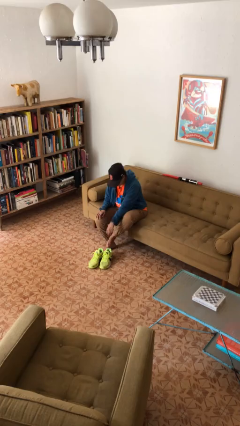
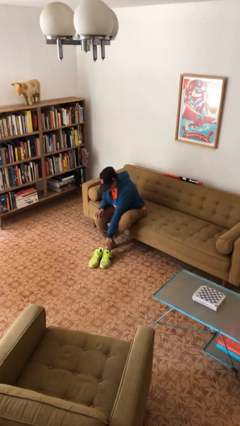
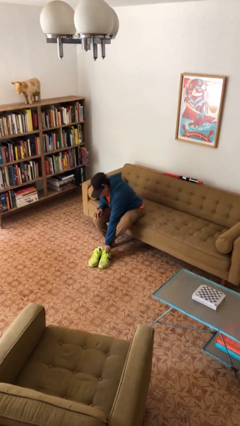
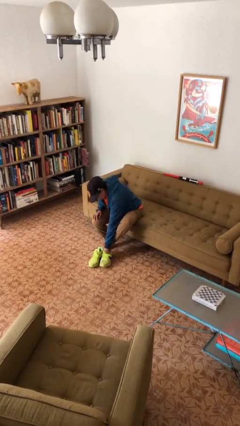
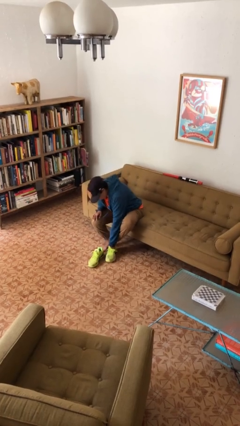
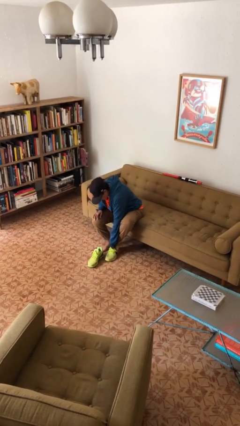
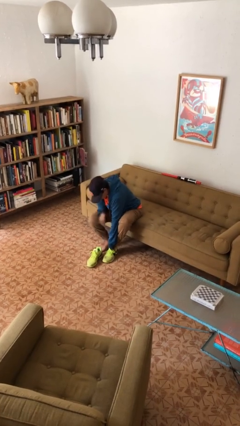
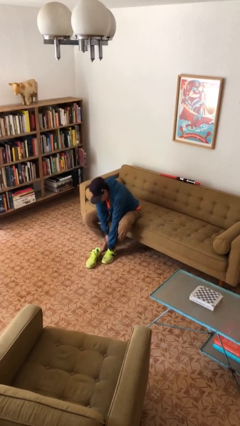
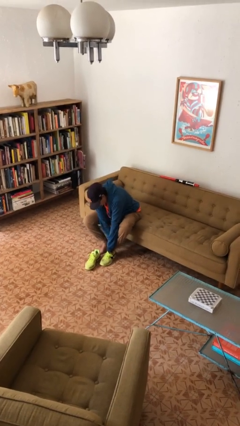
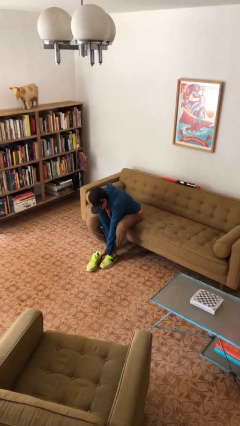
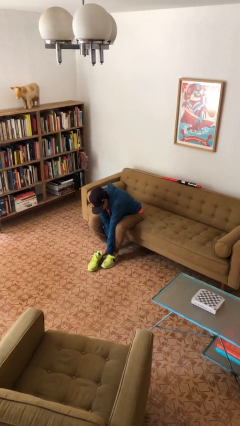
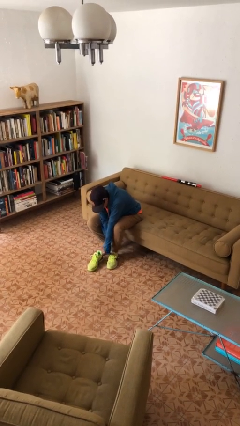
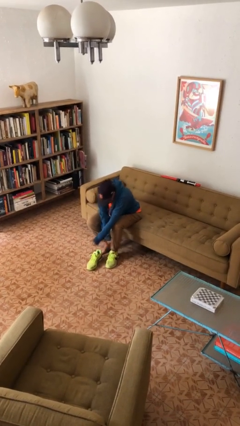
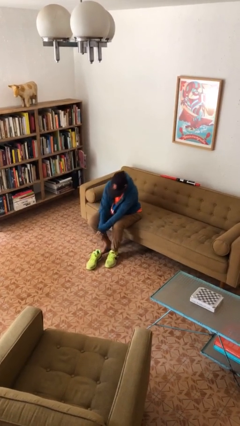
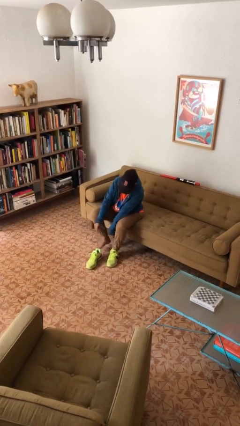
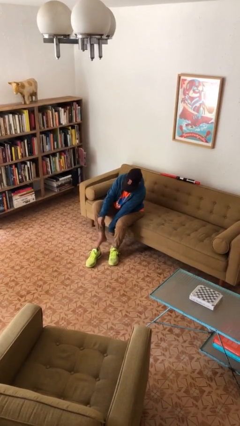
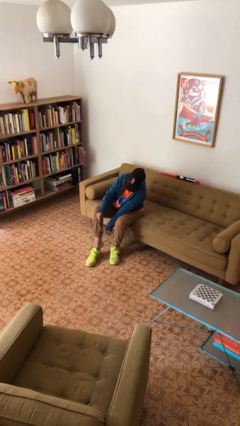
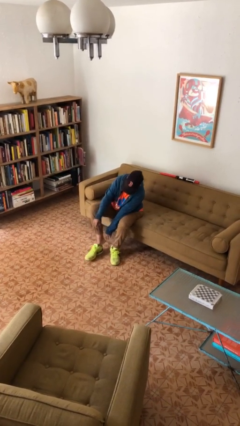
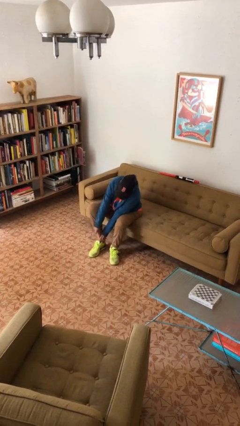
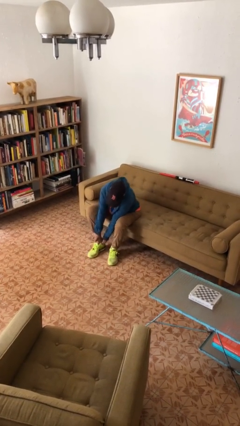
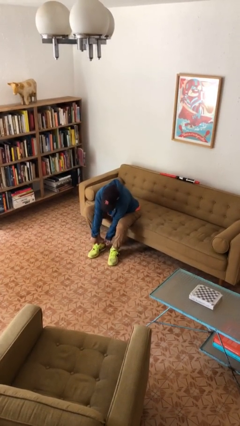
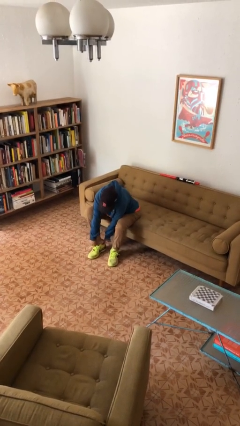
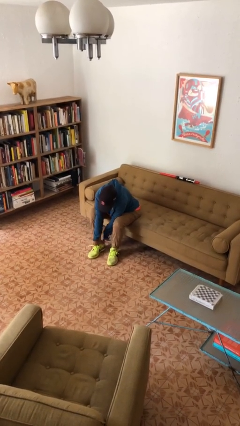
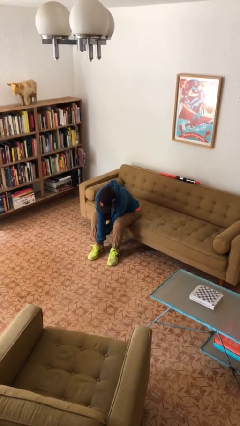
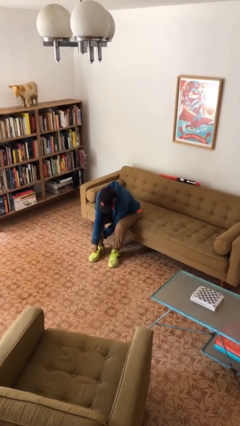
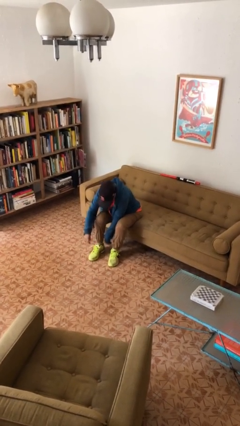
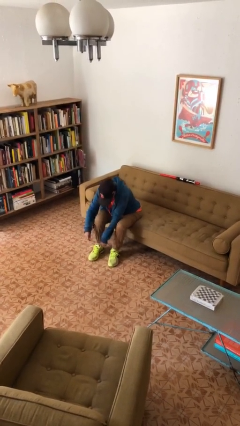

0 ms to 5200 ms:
person puts on shoes

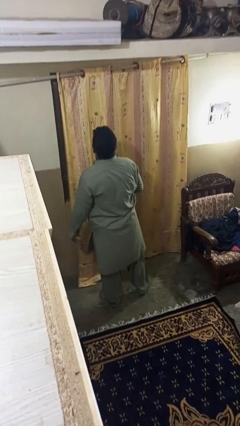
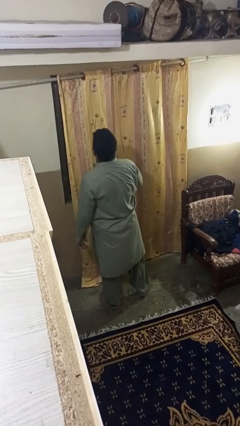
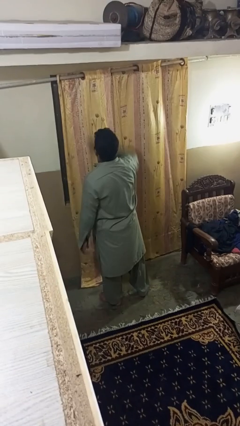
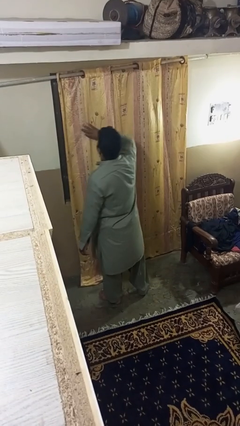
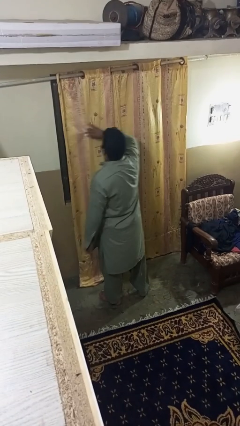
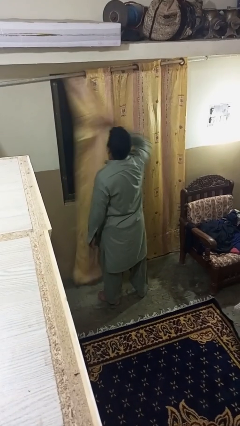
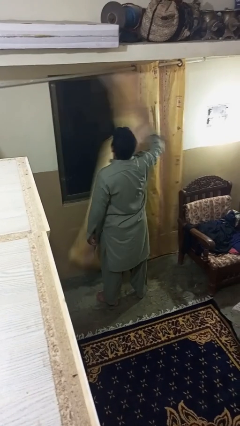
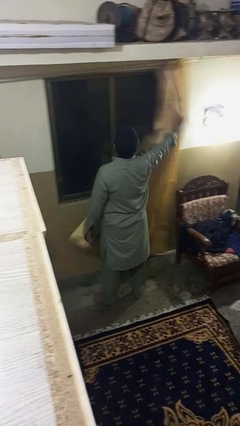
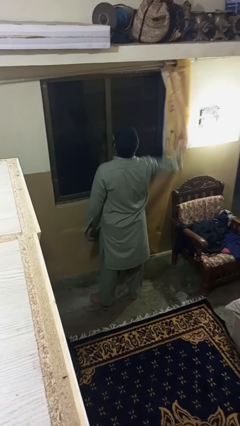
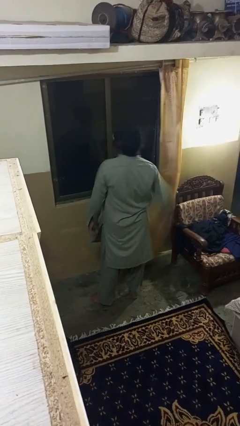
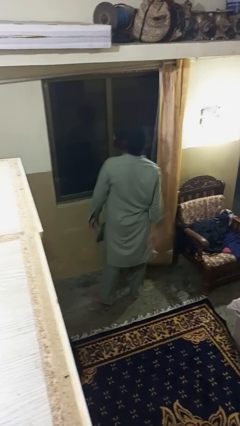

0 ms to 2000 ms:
person opens curtains

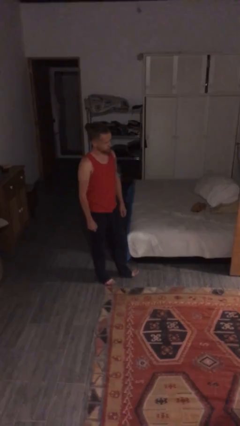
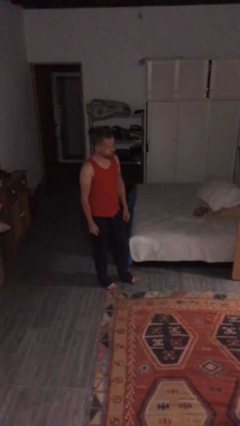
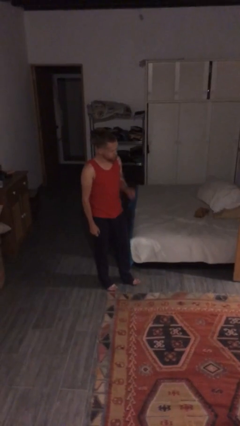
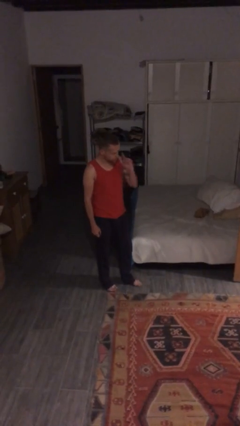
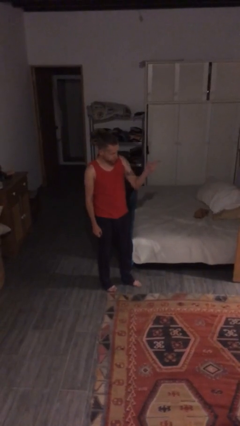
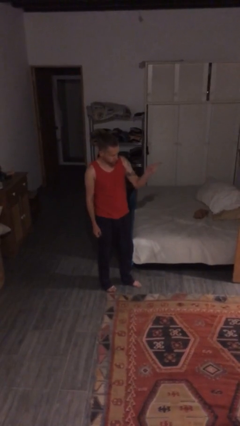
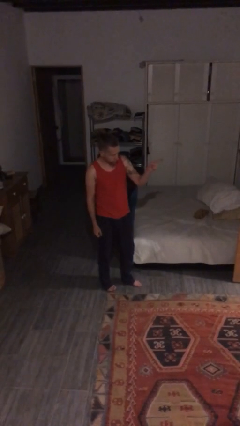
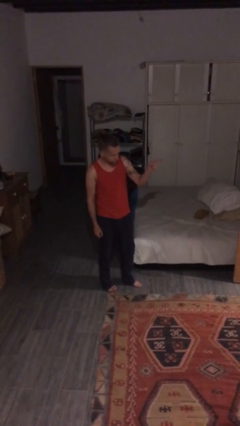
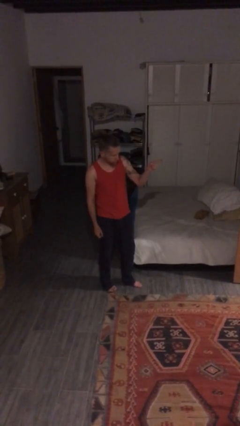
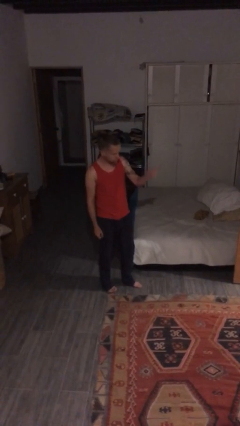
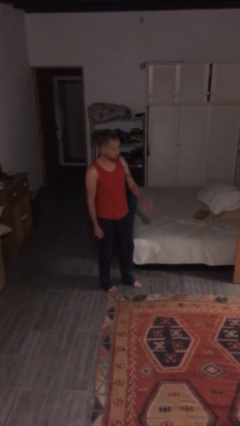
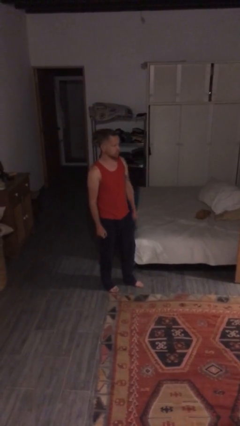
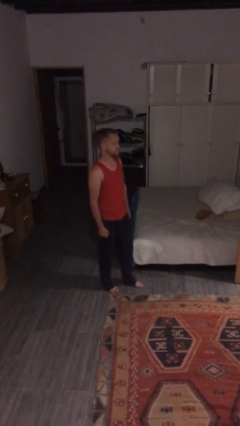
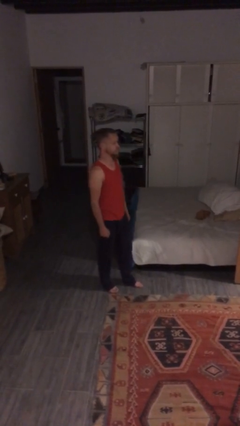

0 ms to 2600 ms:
person points at person

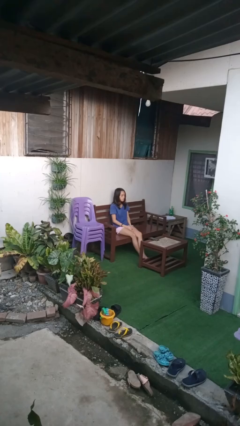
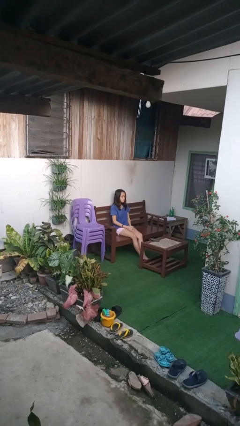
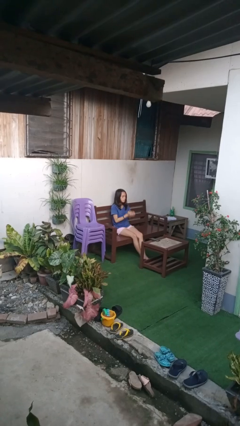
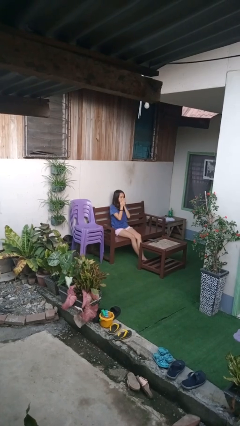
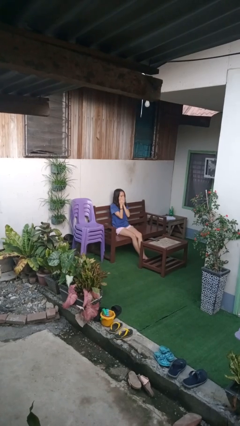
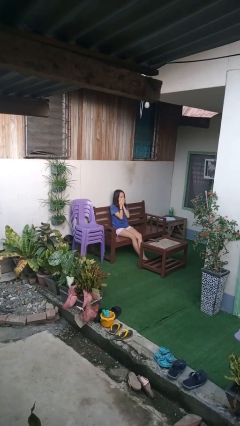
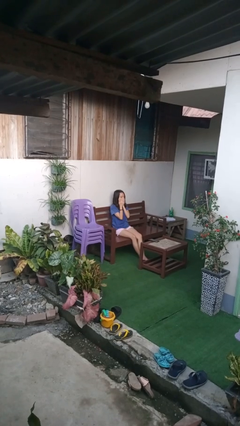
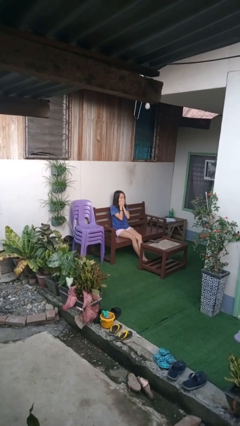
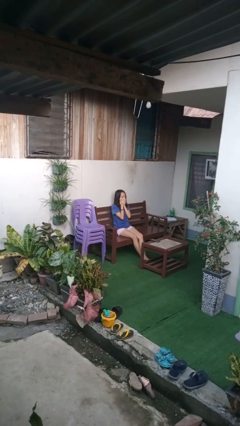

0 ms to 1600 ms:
person yawns

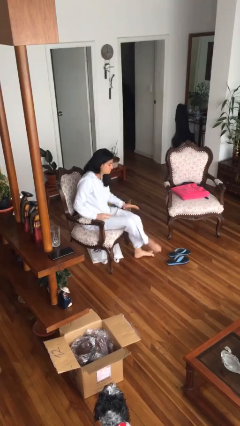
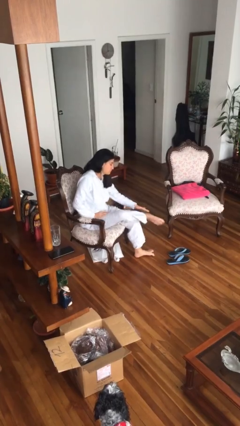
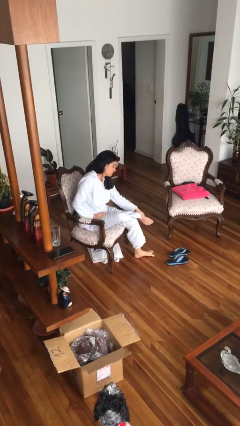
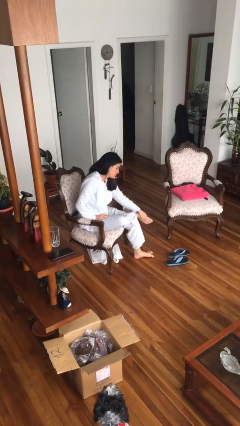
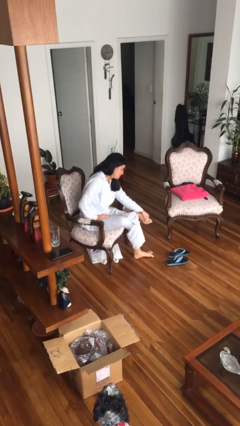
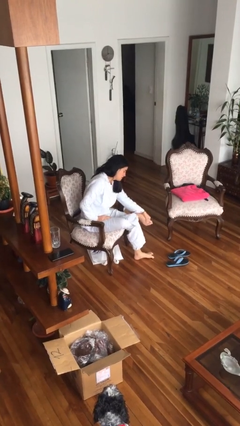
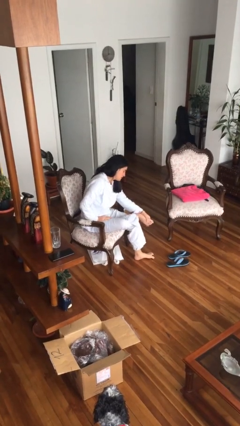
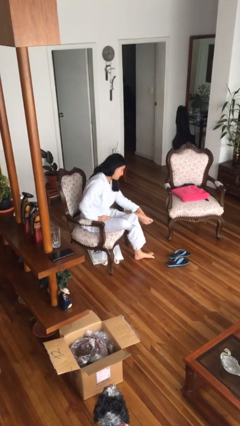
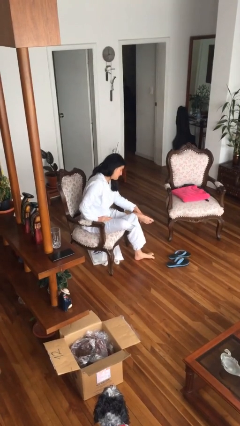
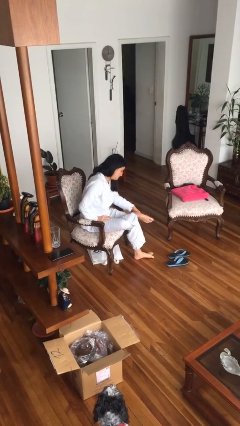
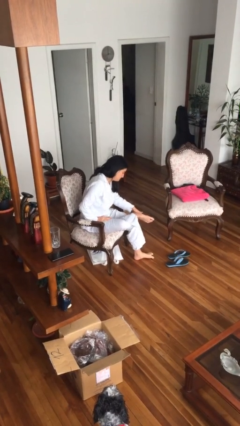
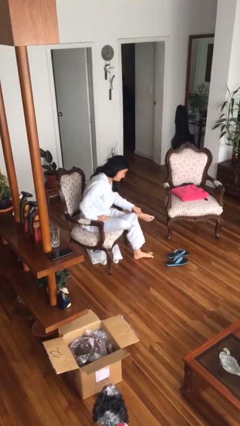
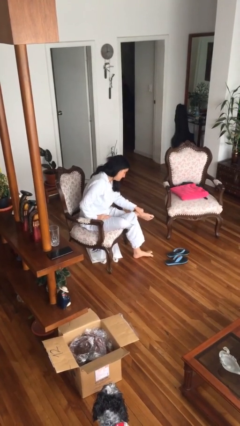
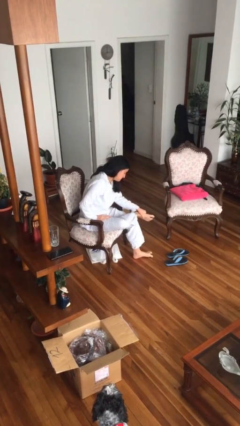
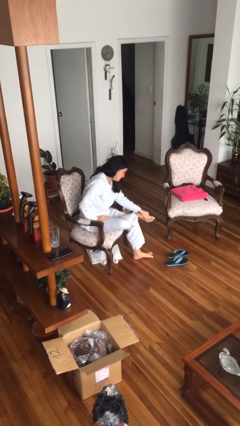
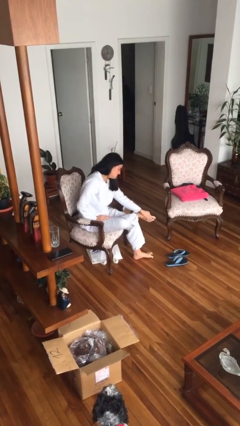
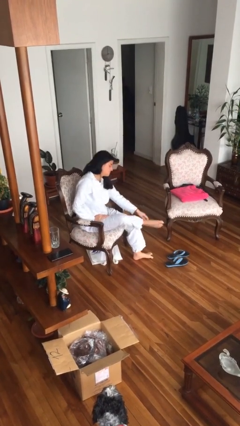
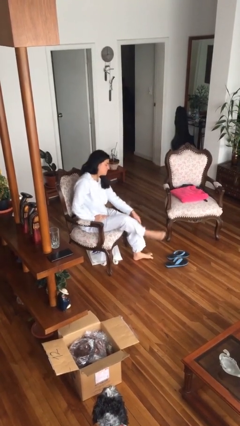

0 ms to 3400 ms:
person rubs foot

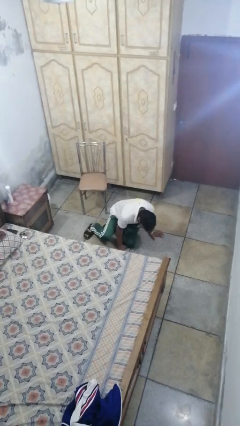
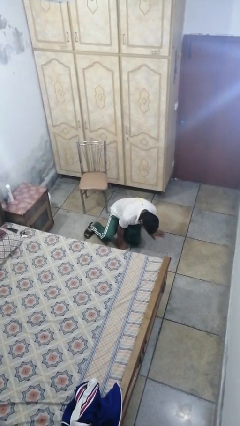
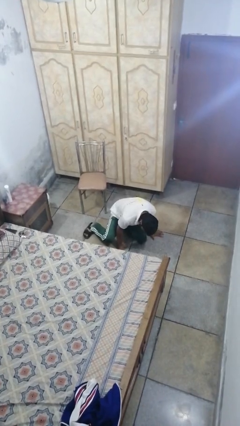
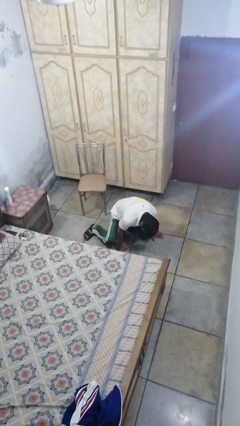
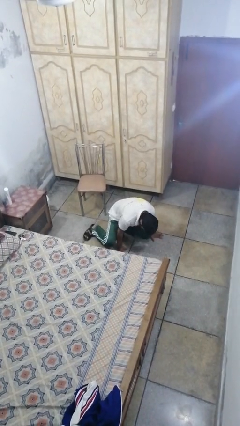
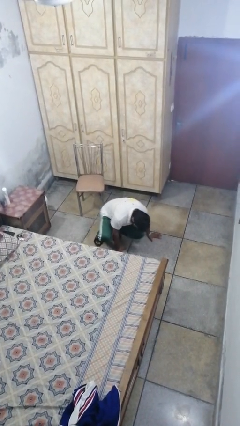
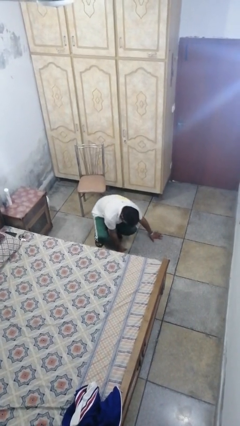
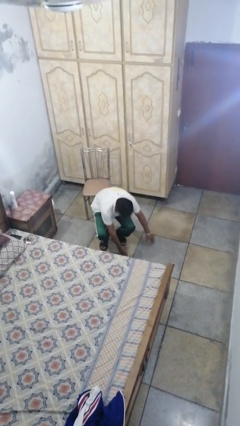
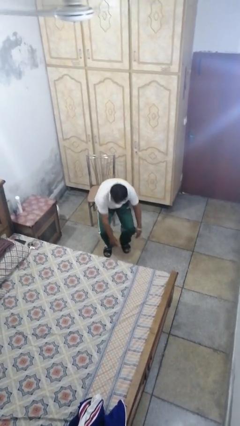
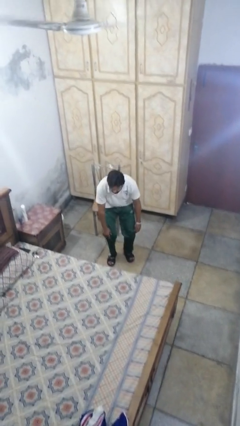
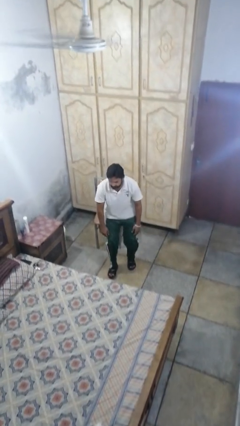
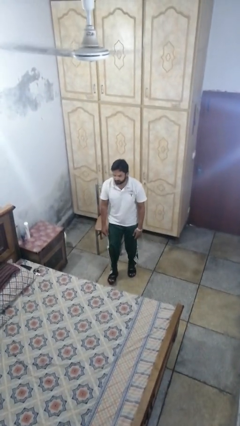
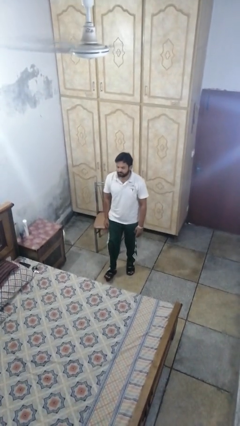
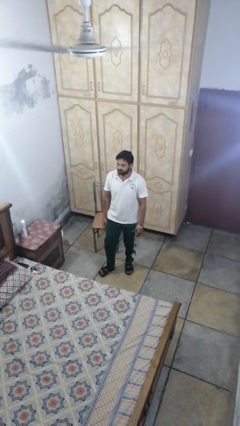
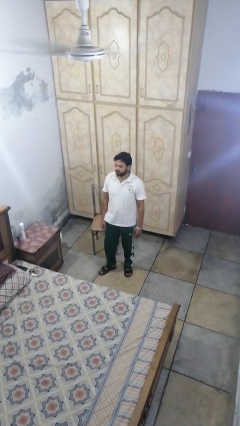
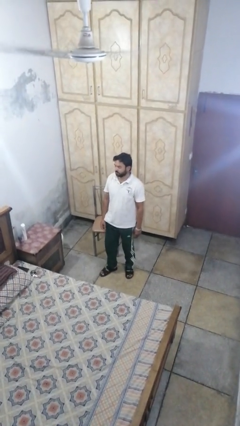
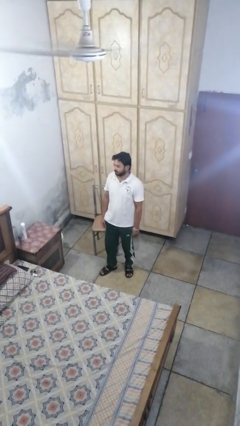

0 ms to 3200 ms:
person stands up from floor
